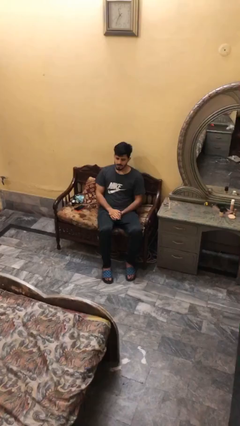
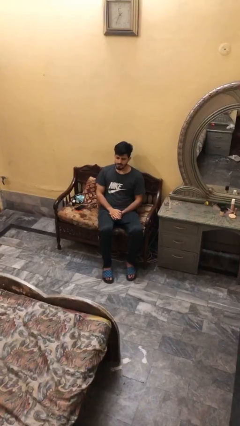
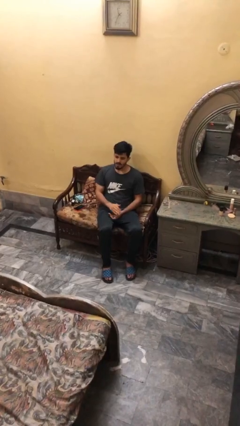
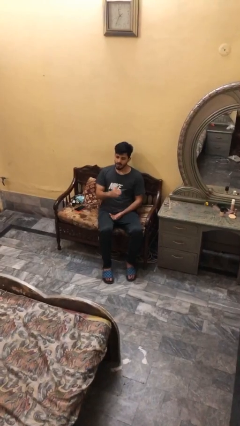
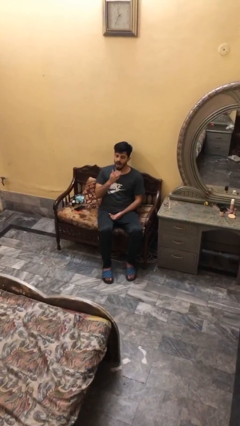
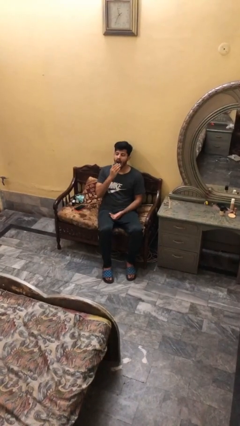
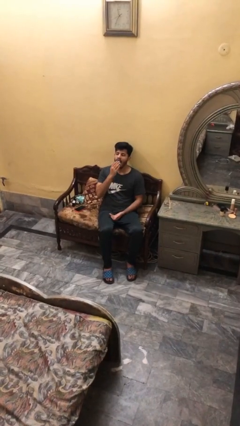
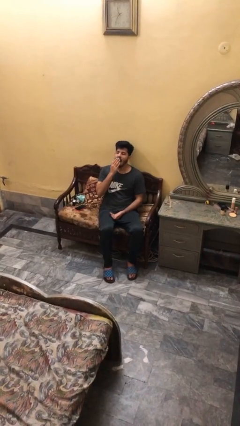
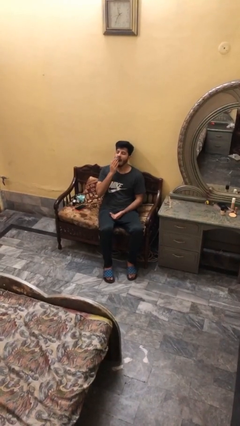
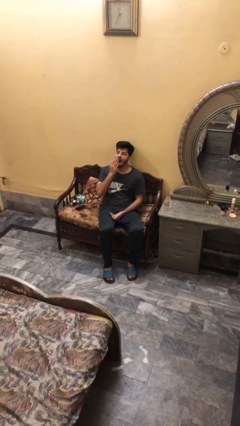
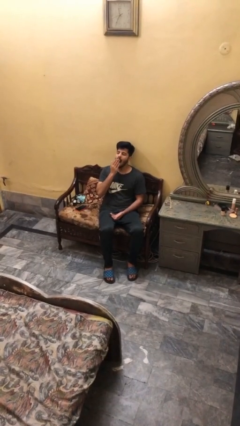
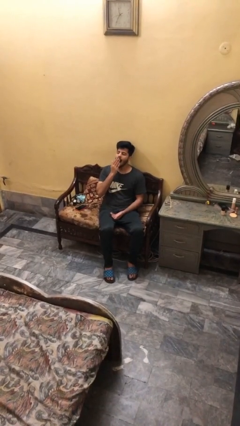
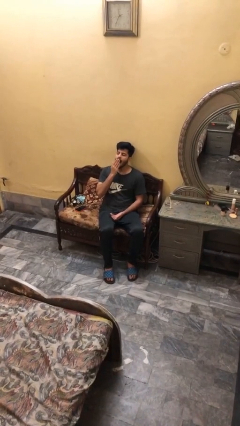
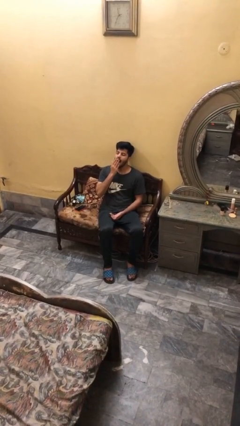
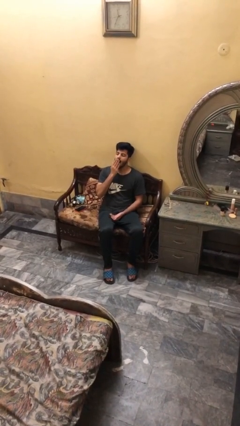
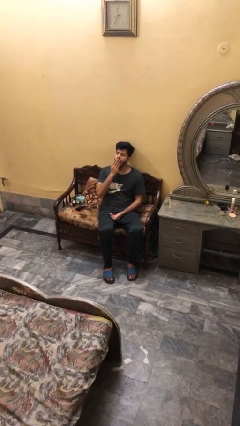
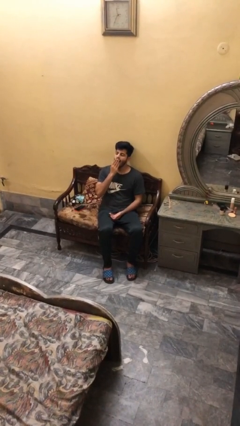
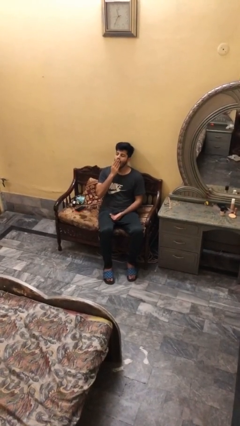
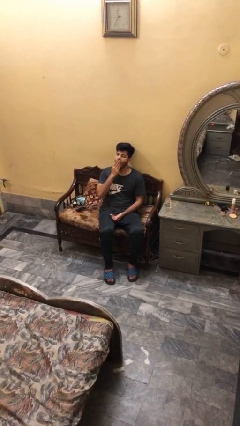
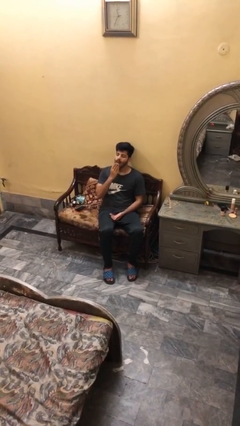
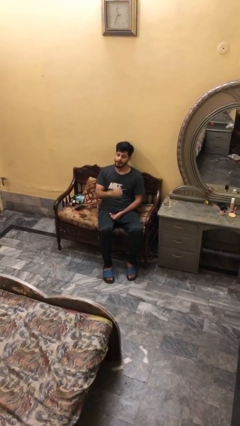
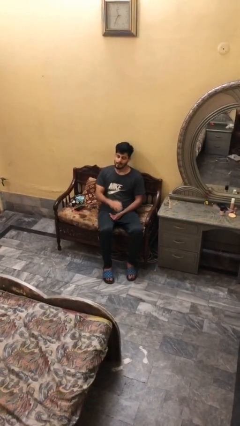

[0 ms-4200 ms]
person yawns

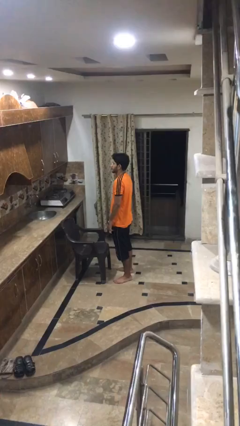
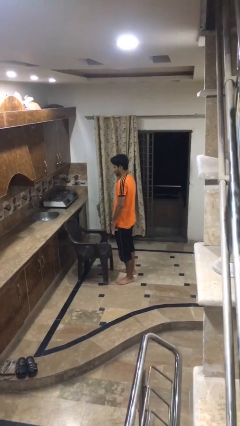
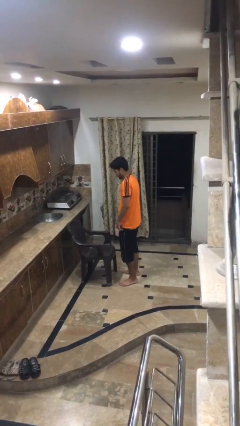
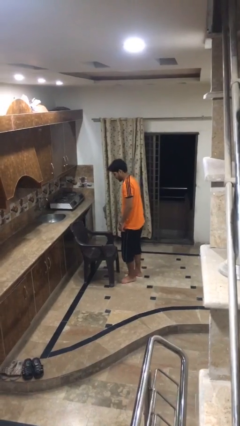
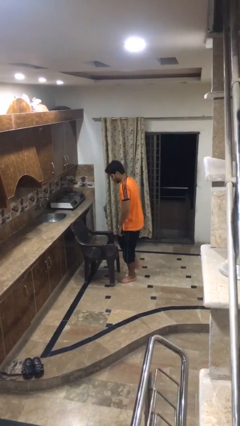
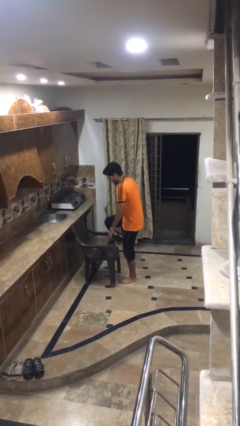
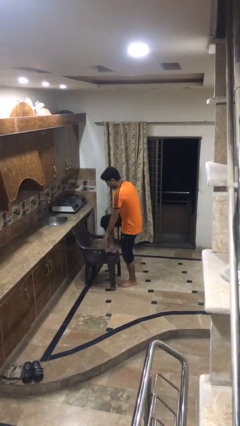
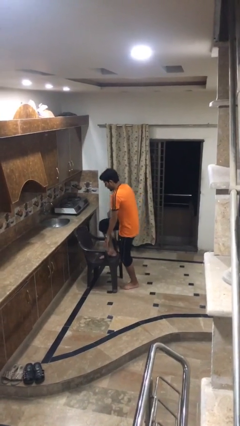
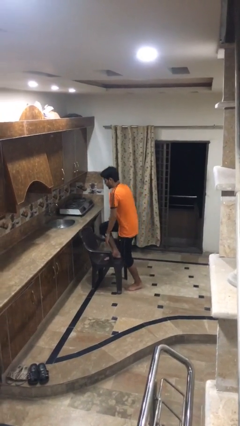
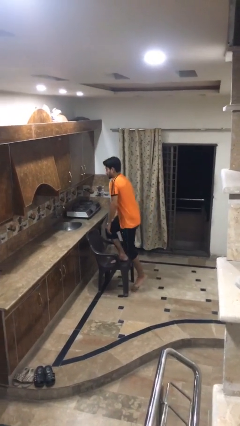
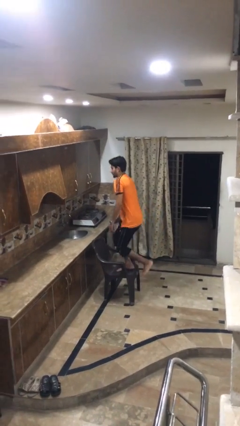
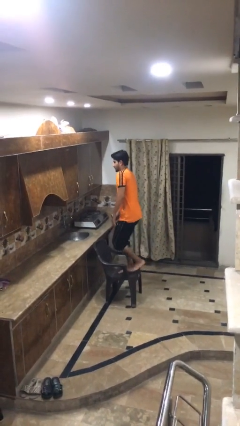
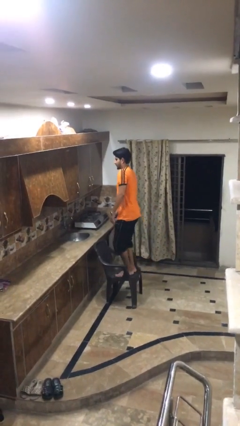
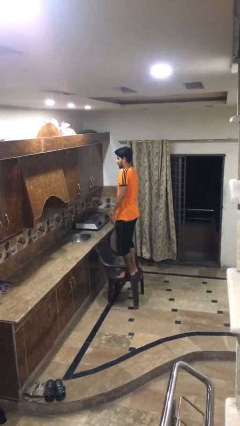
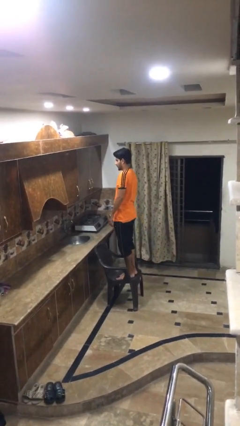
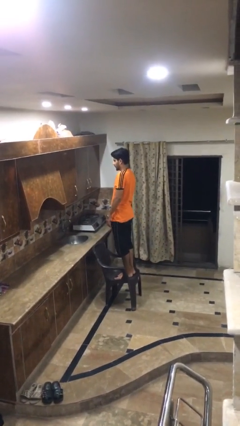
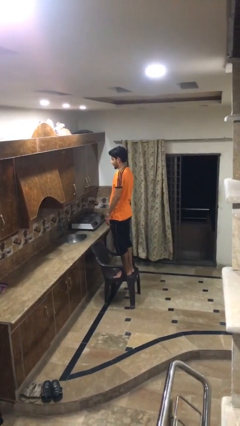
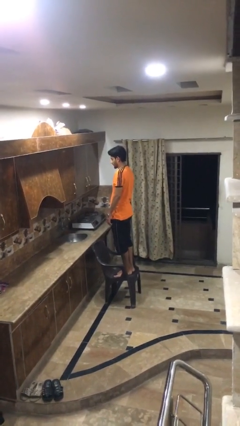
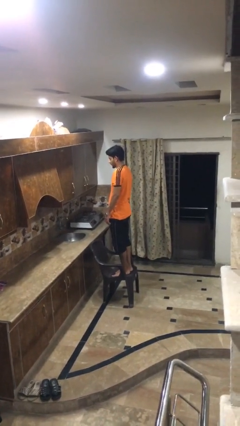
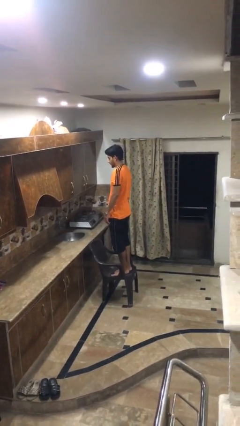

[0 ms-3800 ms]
person climbs on chair

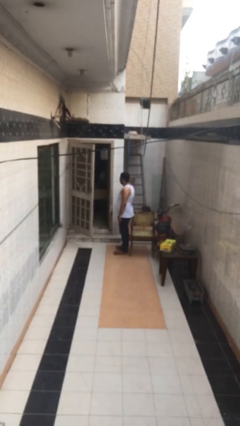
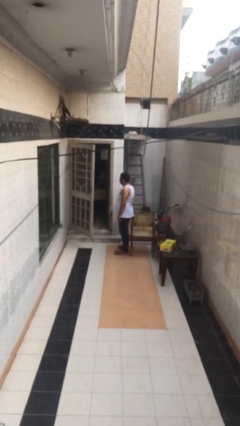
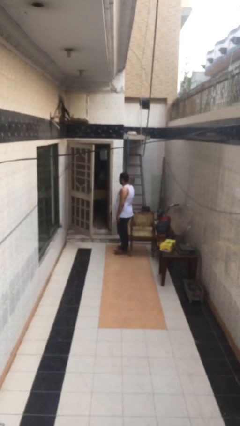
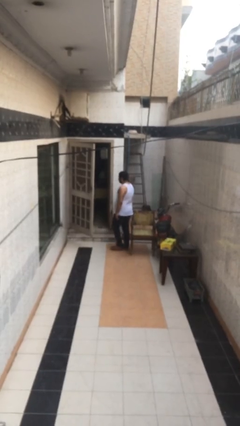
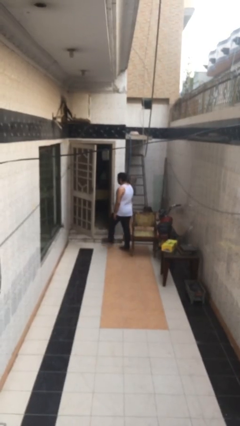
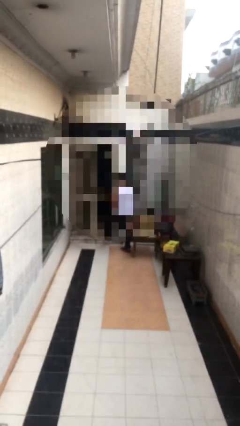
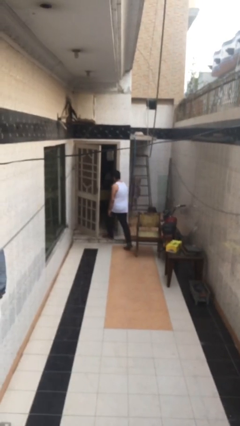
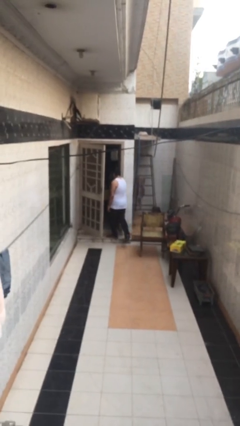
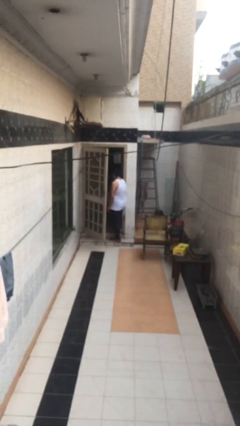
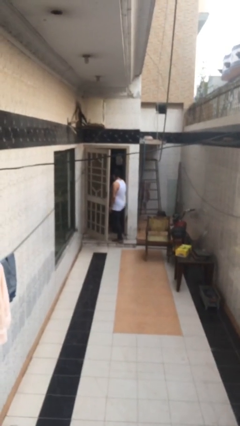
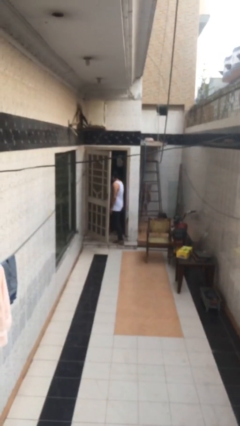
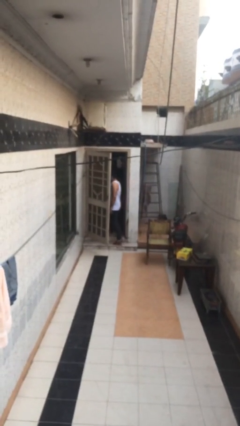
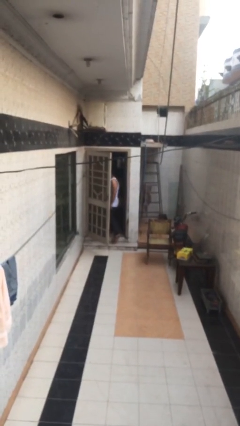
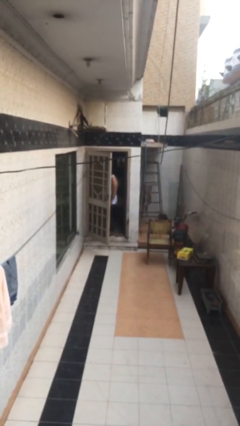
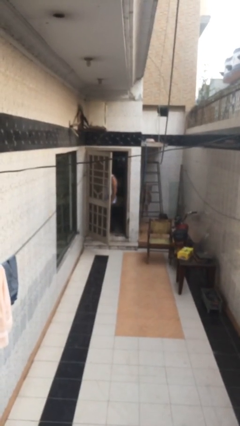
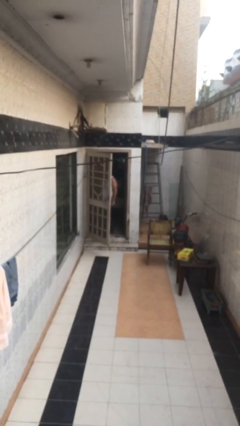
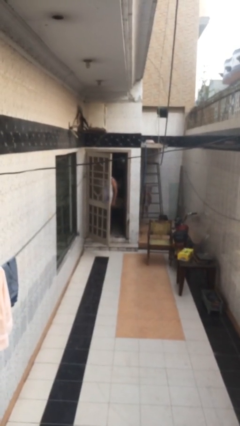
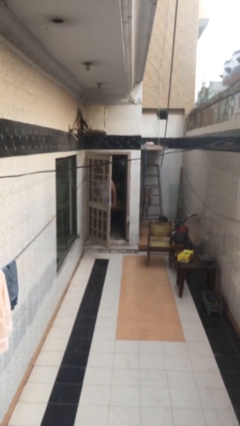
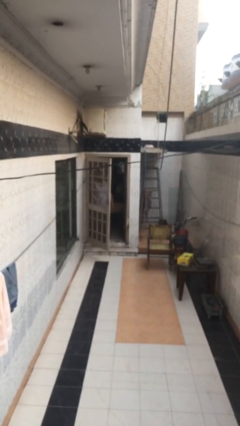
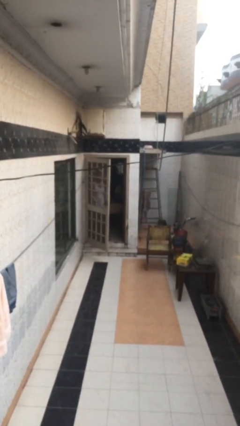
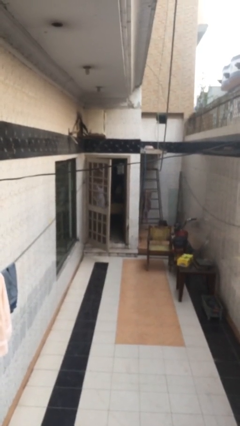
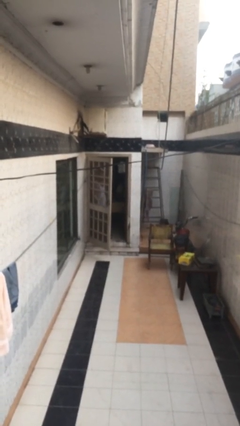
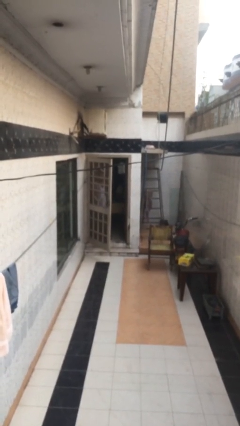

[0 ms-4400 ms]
person exits scene through structure

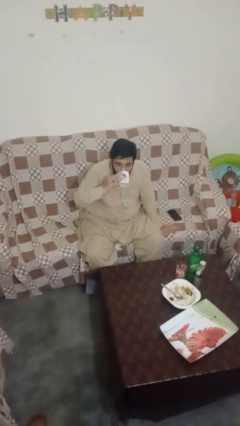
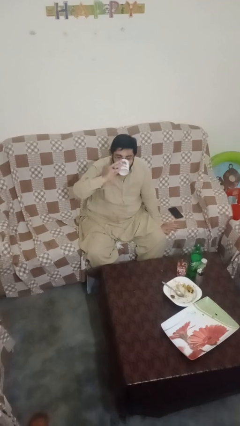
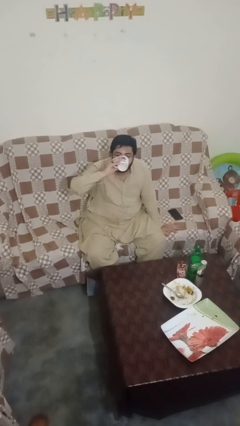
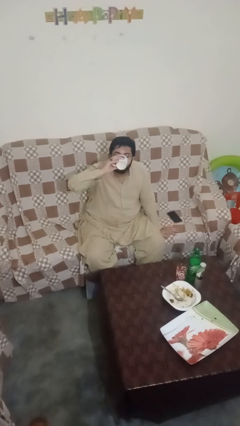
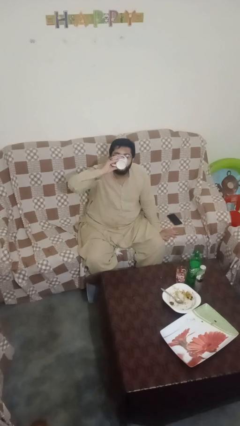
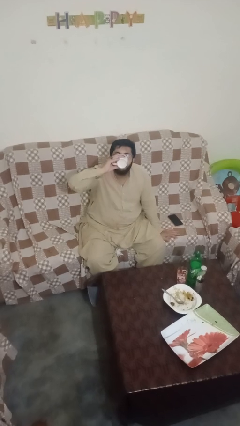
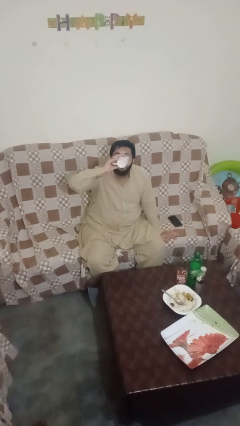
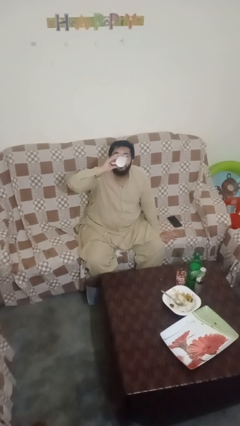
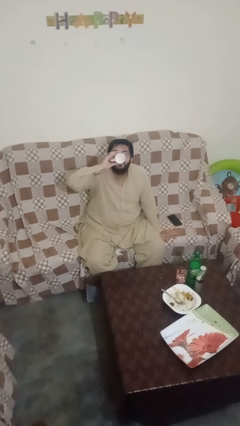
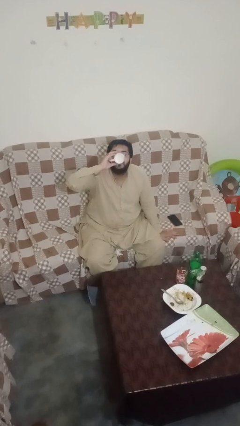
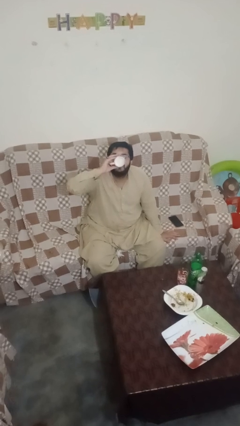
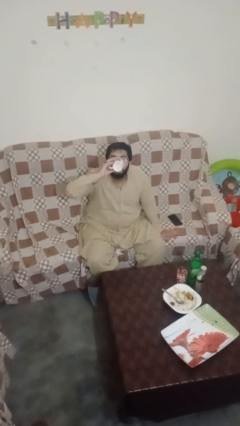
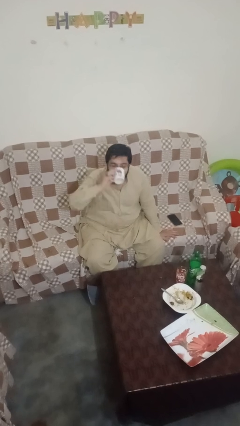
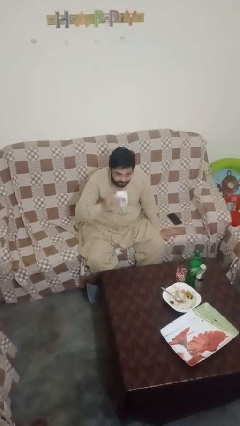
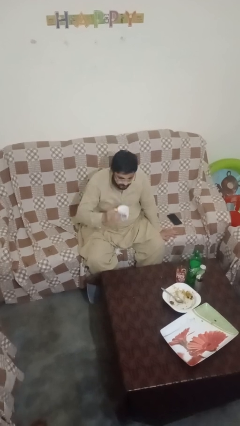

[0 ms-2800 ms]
person drinks from mug

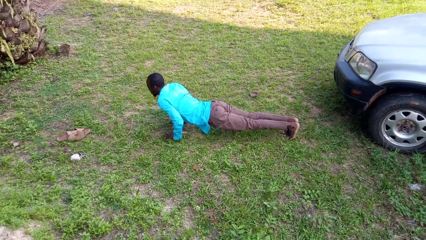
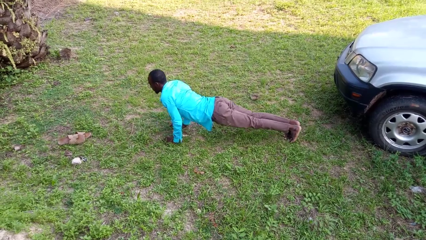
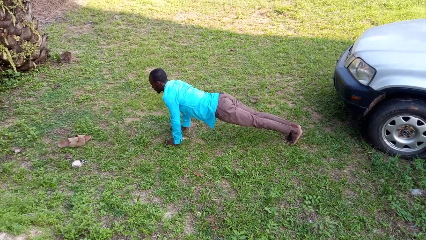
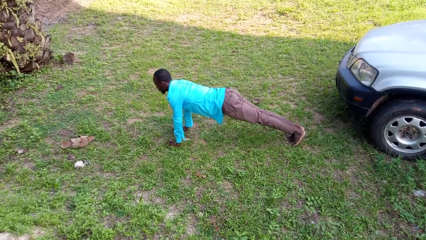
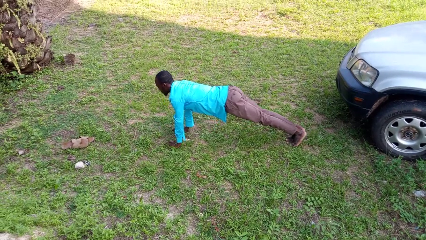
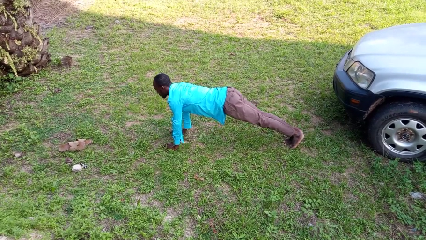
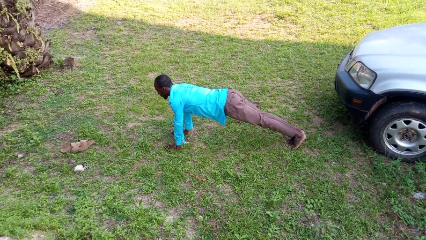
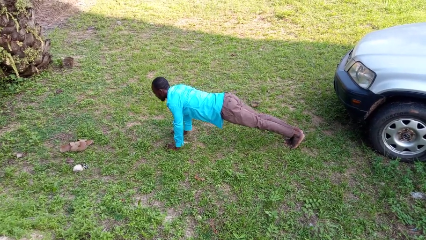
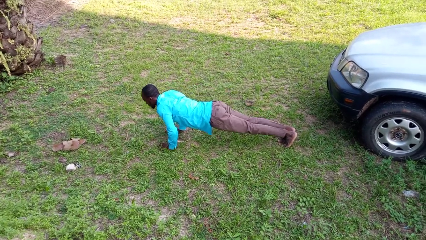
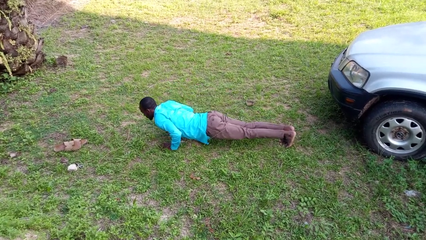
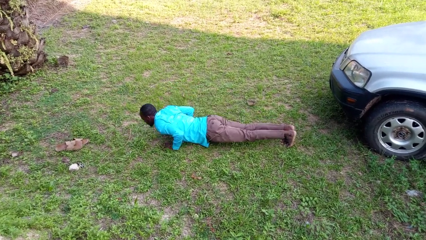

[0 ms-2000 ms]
person exercises with pushup

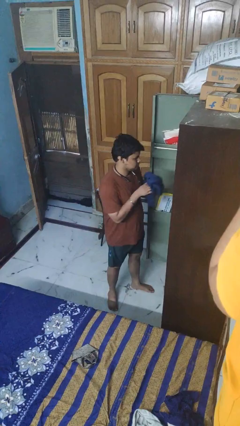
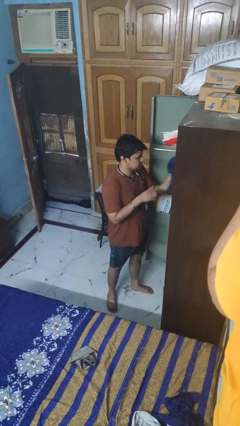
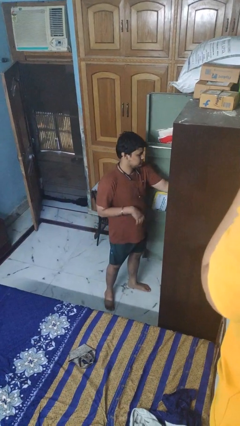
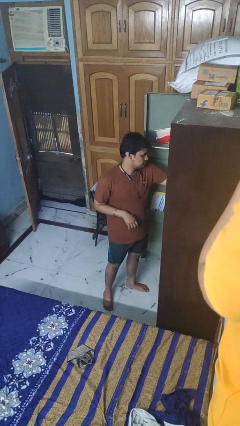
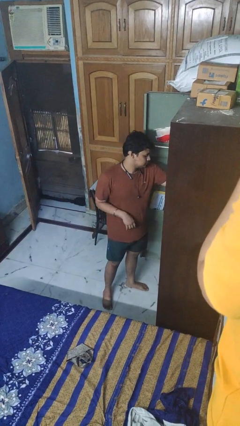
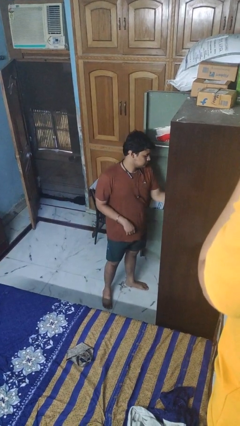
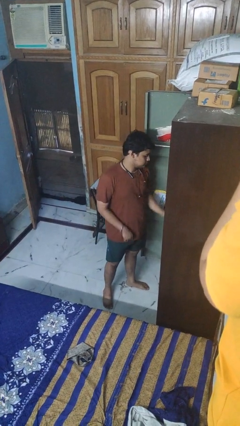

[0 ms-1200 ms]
person puts clothes into dresser
